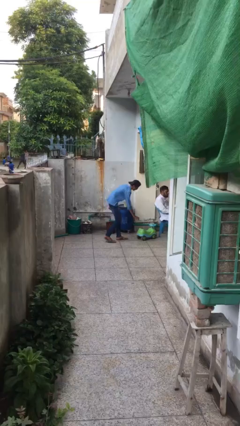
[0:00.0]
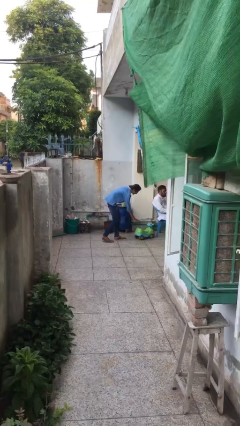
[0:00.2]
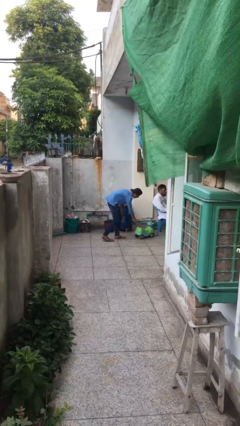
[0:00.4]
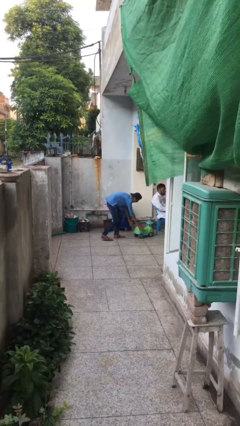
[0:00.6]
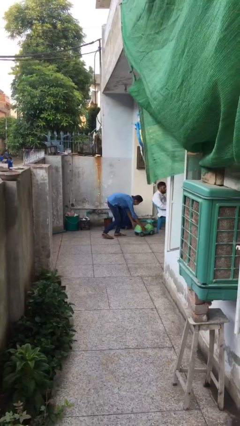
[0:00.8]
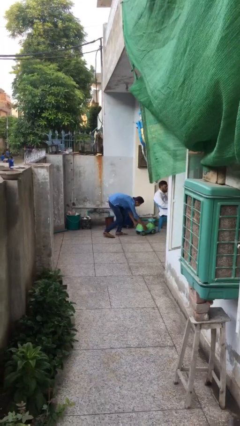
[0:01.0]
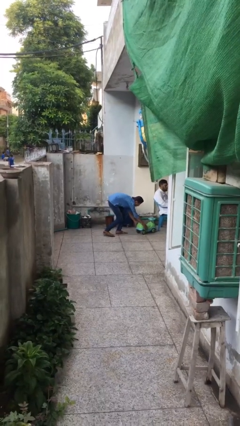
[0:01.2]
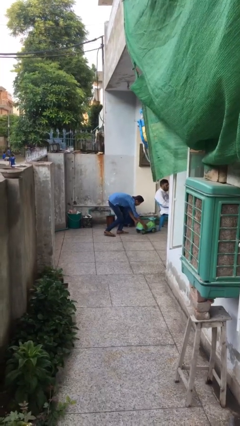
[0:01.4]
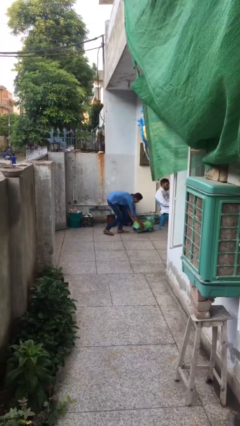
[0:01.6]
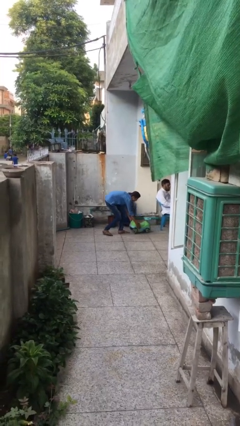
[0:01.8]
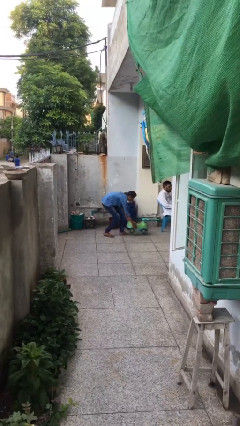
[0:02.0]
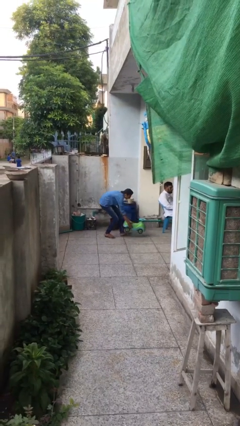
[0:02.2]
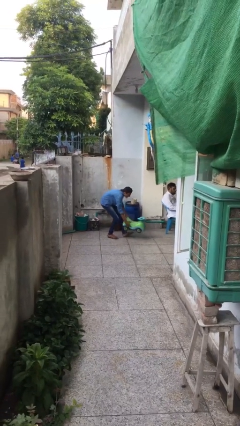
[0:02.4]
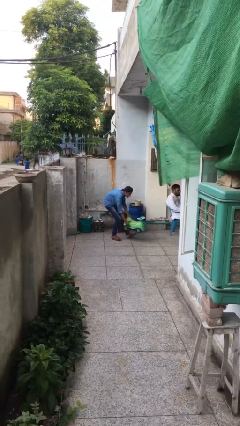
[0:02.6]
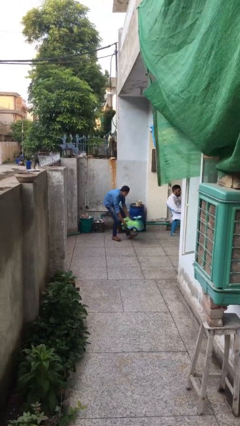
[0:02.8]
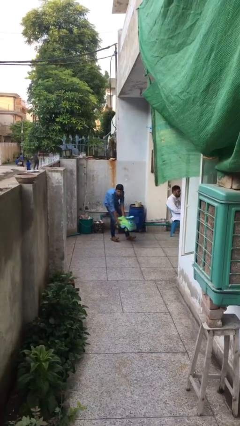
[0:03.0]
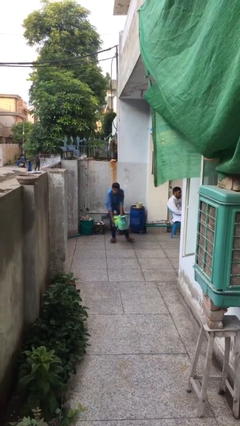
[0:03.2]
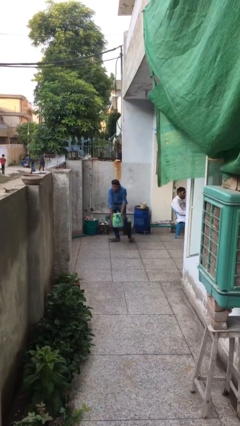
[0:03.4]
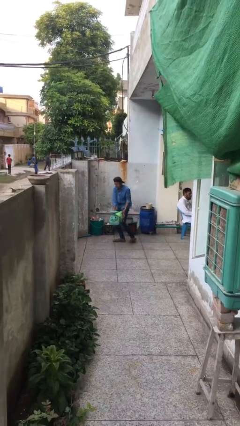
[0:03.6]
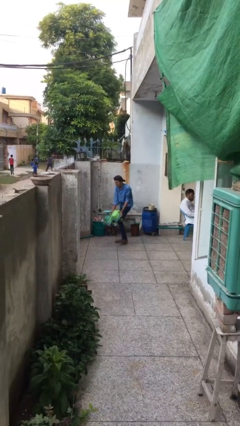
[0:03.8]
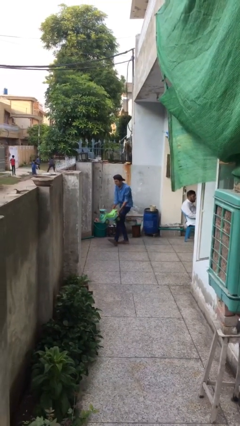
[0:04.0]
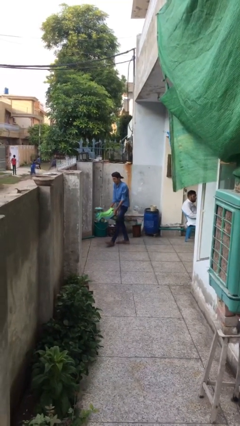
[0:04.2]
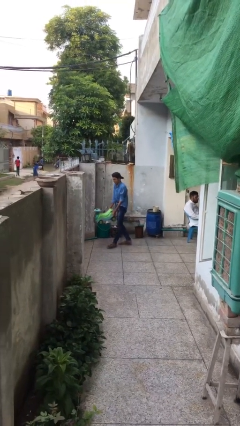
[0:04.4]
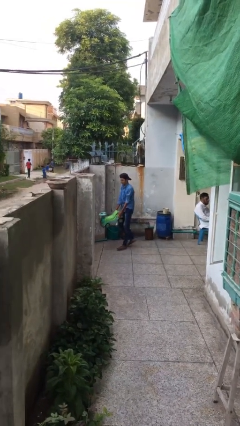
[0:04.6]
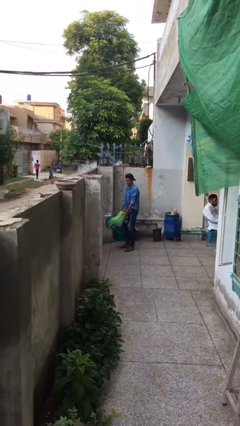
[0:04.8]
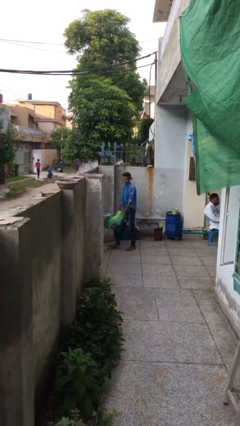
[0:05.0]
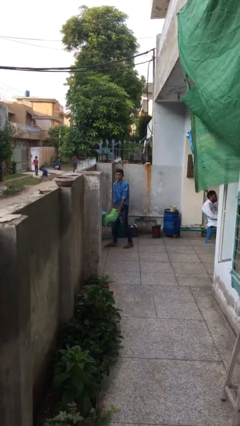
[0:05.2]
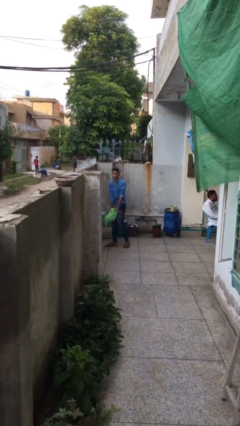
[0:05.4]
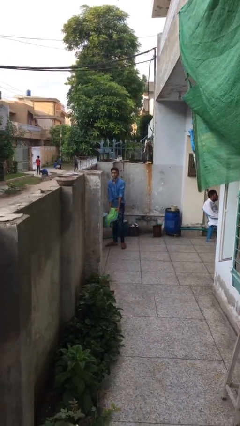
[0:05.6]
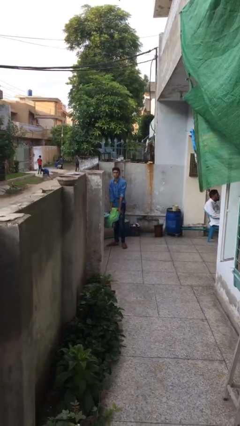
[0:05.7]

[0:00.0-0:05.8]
person steals object from person

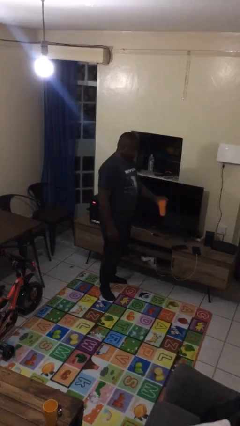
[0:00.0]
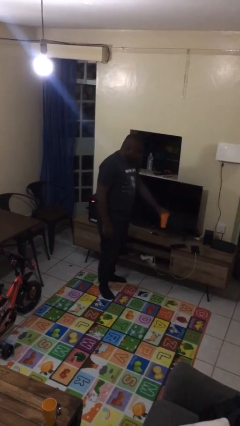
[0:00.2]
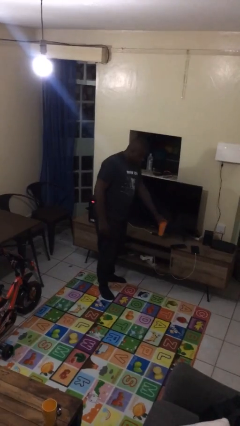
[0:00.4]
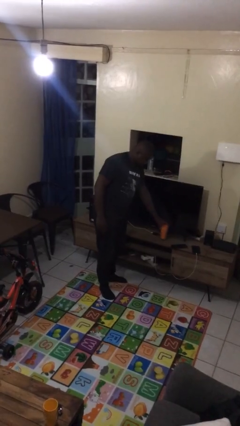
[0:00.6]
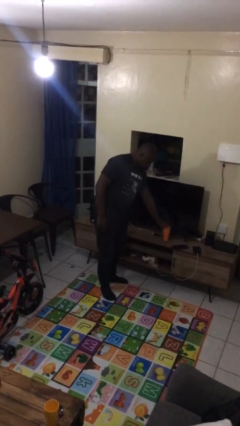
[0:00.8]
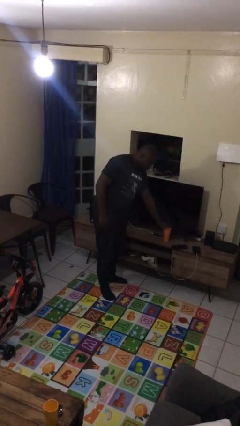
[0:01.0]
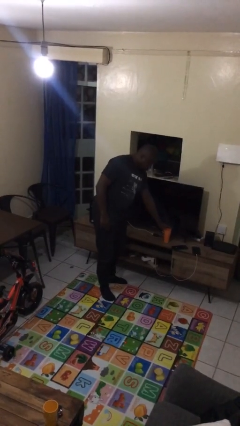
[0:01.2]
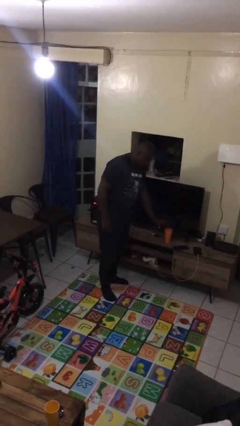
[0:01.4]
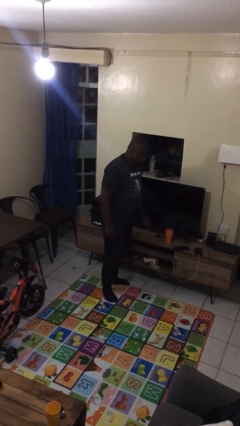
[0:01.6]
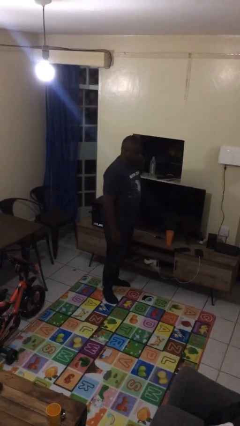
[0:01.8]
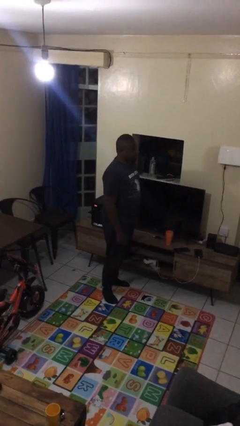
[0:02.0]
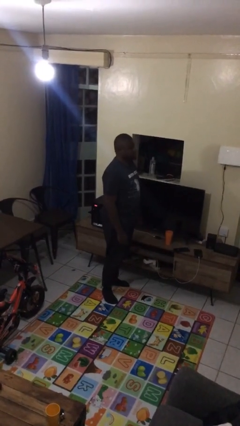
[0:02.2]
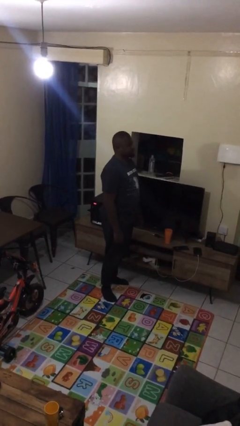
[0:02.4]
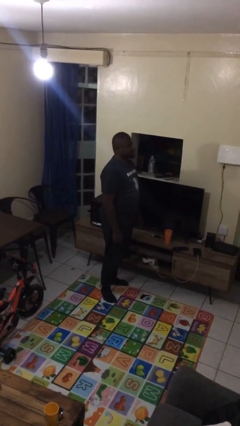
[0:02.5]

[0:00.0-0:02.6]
person puts down object on countertop

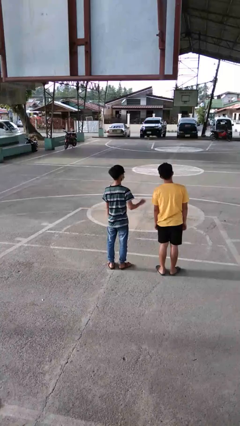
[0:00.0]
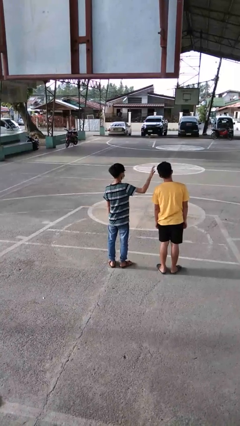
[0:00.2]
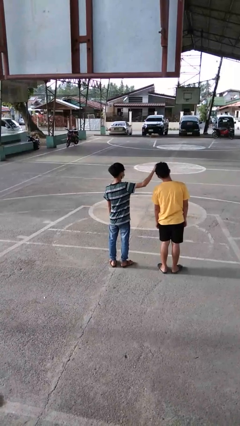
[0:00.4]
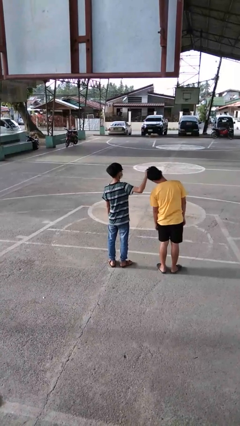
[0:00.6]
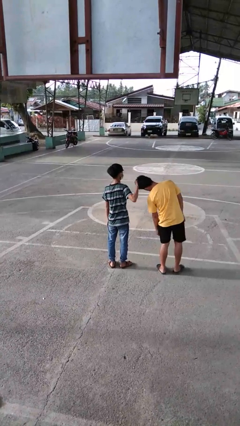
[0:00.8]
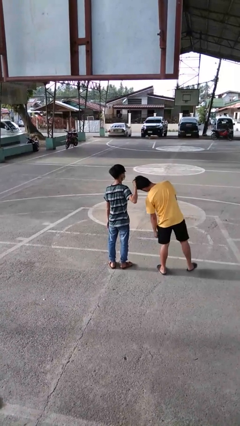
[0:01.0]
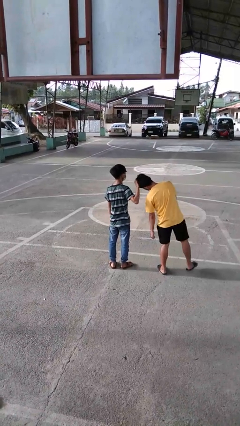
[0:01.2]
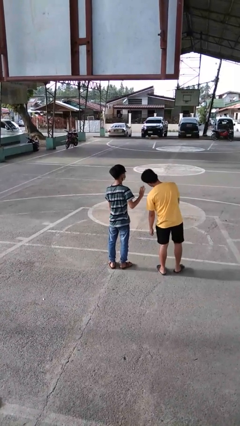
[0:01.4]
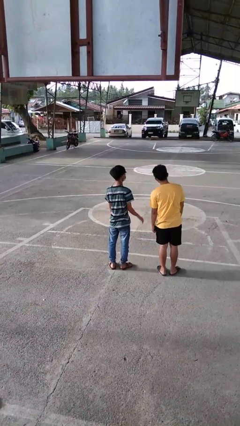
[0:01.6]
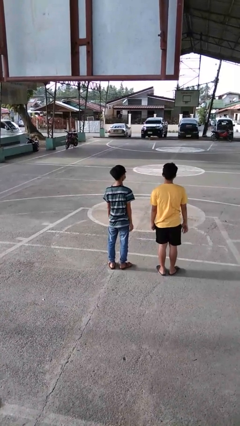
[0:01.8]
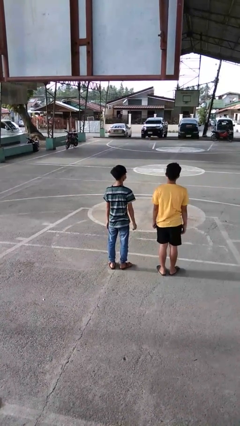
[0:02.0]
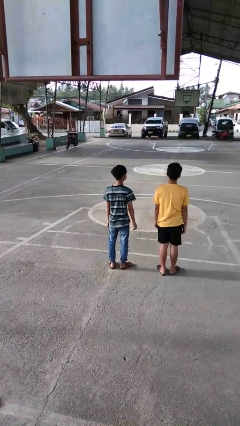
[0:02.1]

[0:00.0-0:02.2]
person grabs person by hair

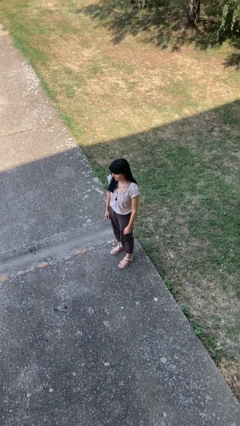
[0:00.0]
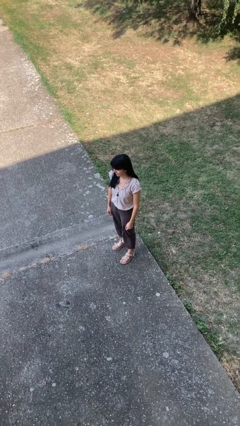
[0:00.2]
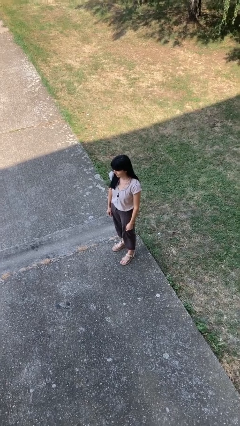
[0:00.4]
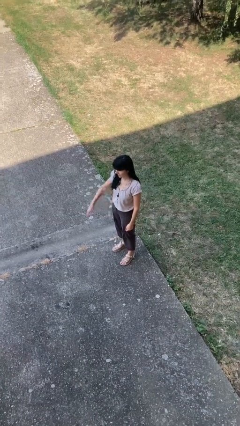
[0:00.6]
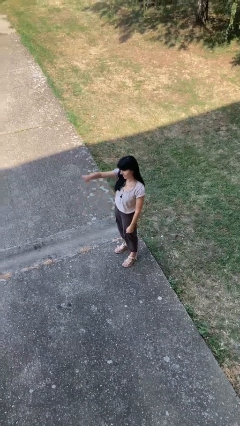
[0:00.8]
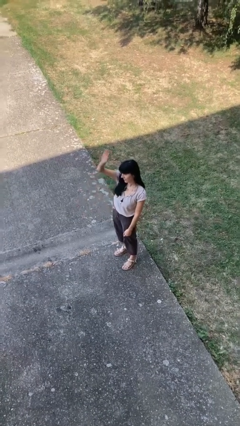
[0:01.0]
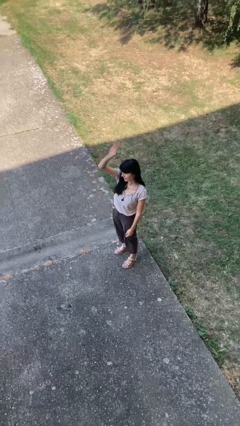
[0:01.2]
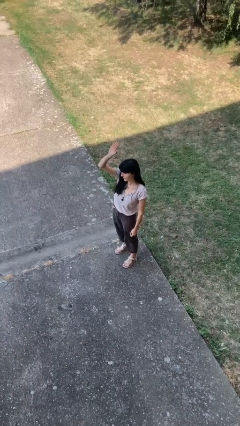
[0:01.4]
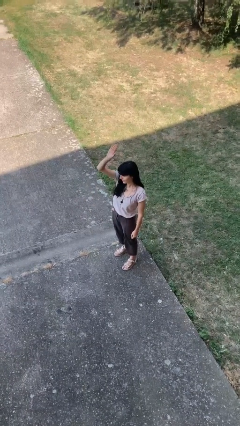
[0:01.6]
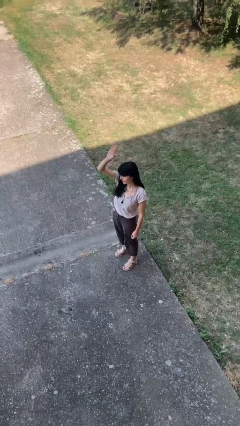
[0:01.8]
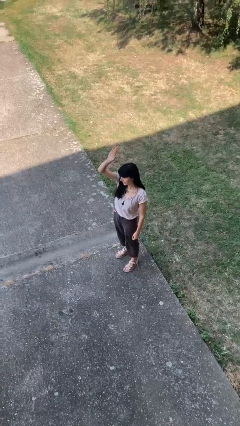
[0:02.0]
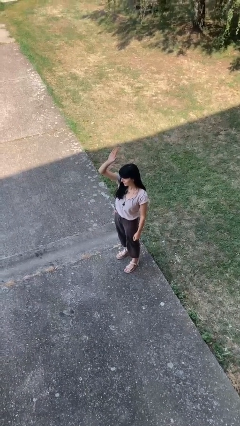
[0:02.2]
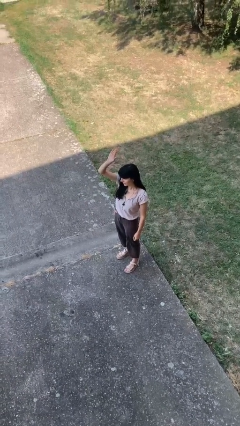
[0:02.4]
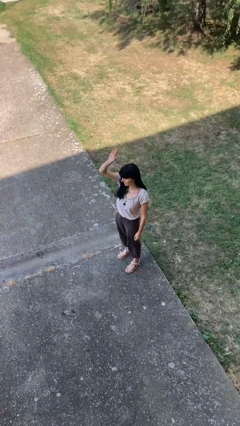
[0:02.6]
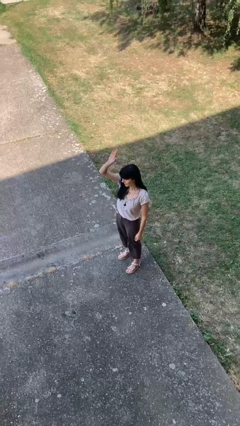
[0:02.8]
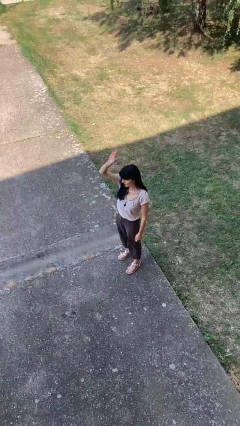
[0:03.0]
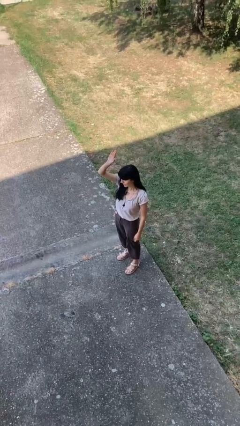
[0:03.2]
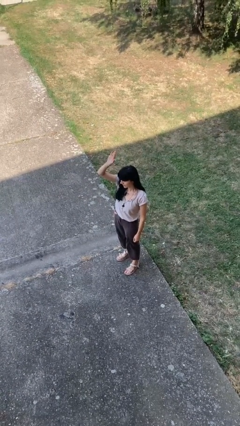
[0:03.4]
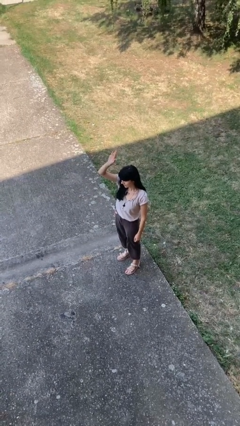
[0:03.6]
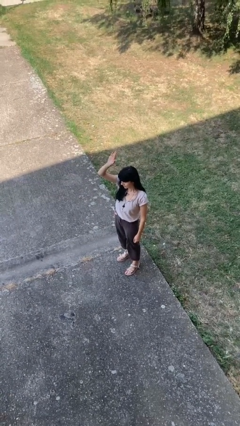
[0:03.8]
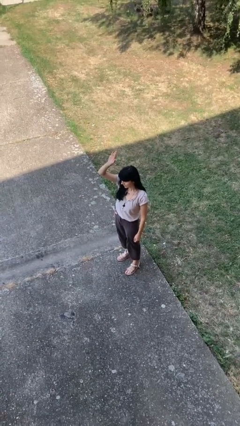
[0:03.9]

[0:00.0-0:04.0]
person gestures raise hand

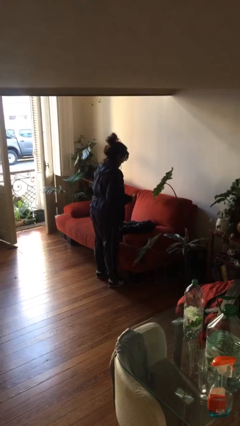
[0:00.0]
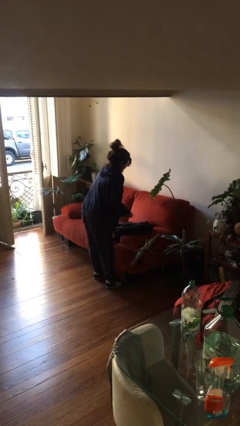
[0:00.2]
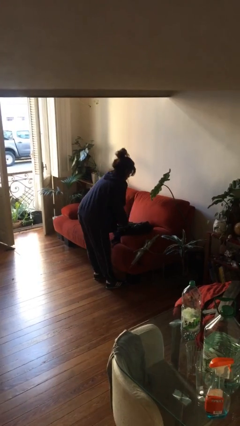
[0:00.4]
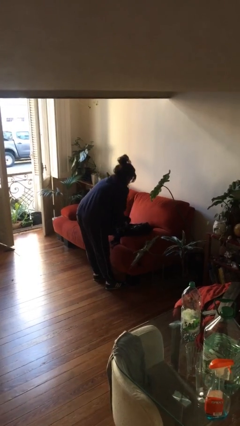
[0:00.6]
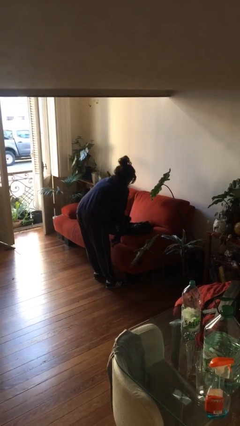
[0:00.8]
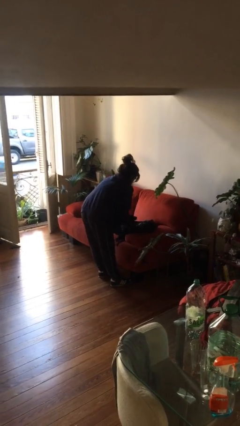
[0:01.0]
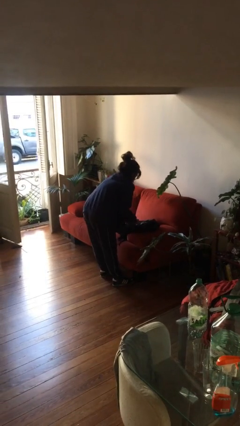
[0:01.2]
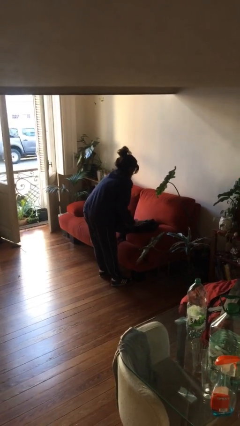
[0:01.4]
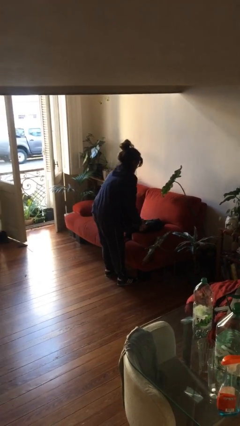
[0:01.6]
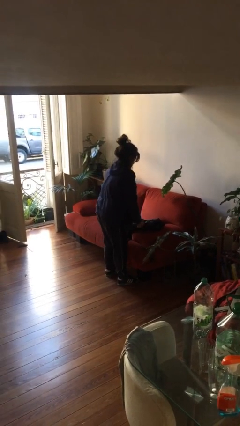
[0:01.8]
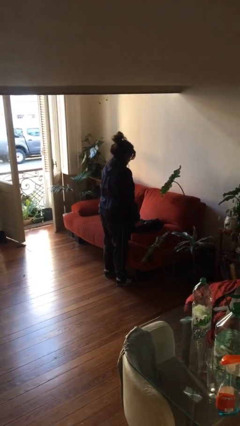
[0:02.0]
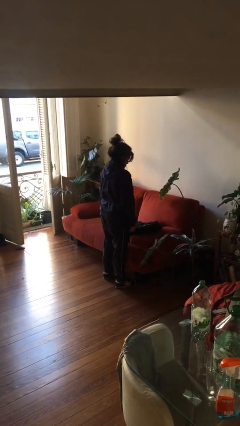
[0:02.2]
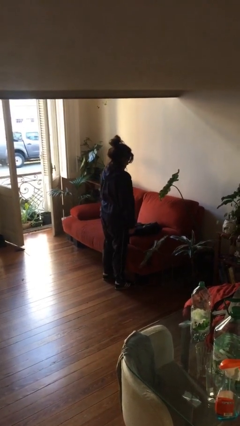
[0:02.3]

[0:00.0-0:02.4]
person puts object into backpack

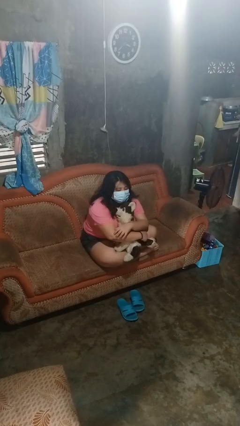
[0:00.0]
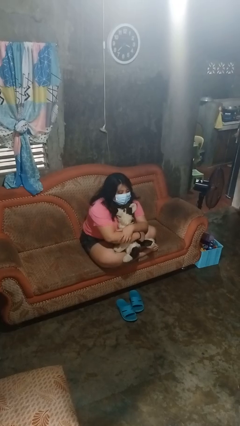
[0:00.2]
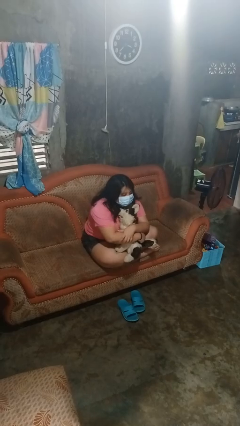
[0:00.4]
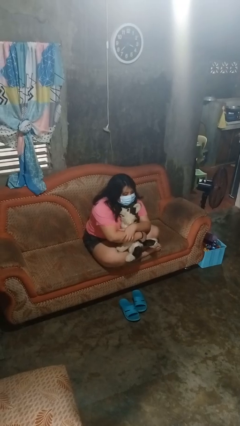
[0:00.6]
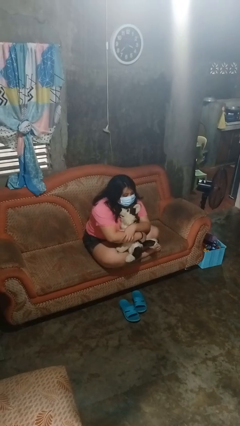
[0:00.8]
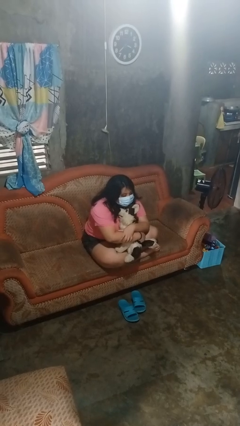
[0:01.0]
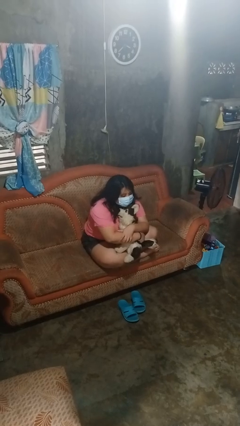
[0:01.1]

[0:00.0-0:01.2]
person hugs stuffed animal
